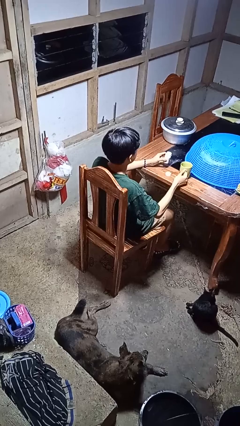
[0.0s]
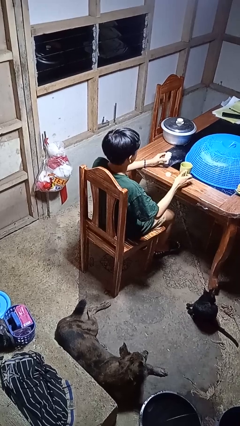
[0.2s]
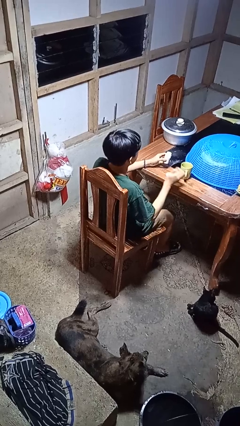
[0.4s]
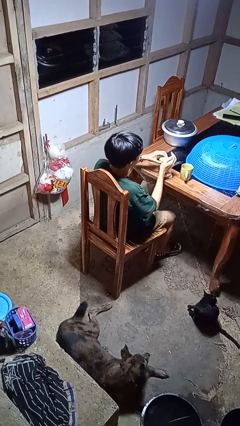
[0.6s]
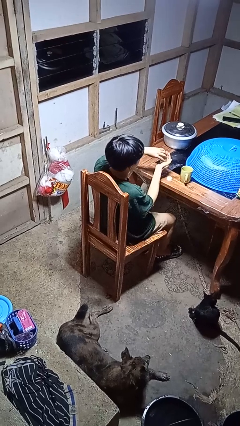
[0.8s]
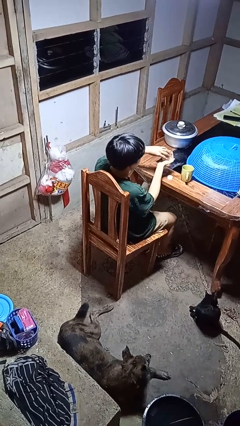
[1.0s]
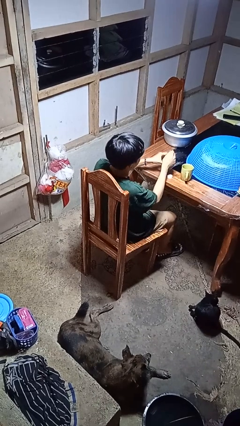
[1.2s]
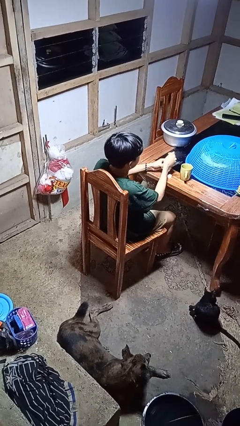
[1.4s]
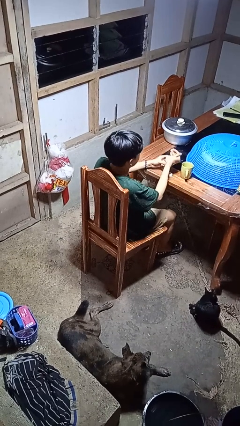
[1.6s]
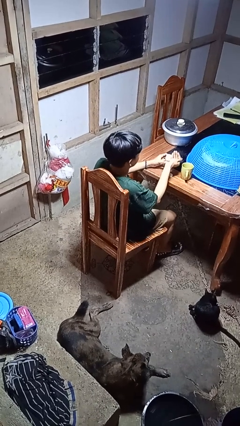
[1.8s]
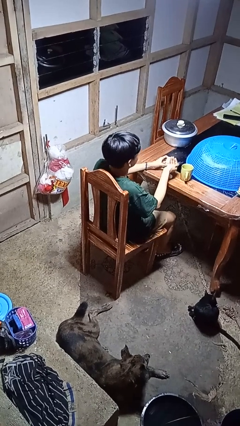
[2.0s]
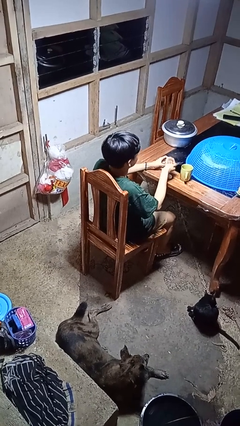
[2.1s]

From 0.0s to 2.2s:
person takes medicine pills

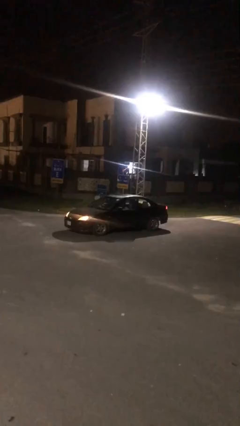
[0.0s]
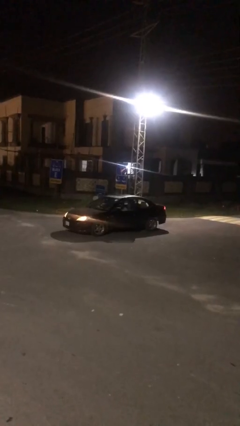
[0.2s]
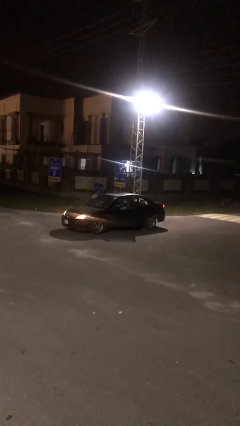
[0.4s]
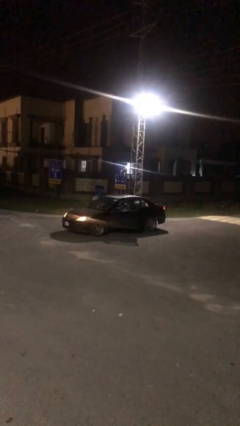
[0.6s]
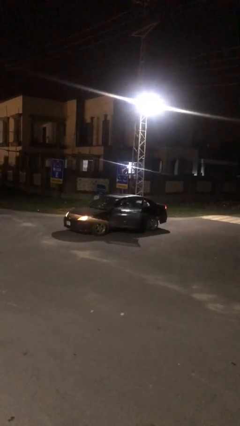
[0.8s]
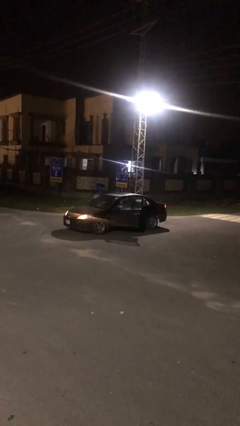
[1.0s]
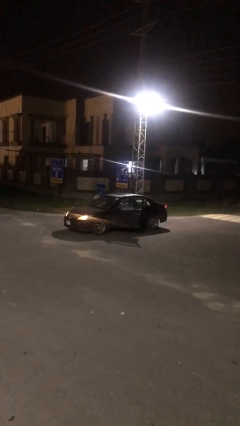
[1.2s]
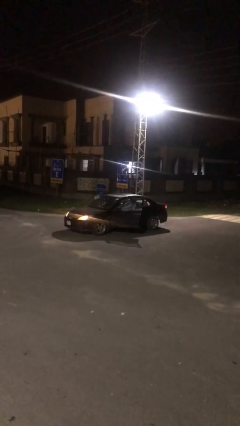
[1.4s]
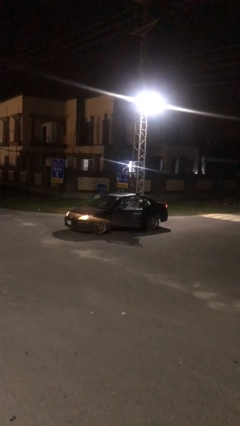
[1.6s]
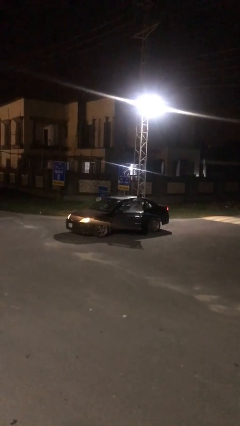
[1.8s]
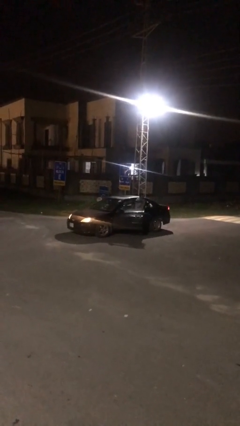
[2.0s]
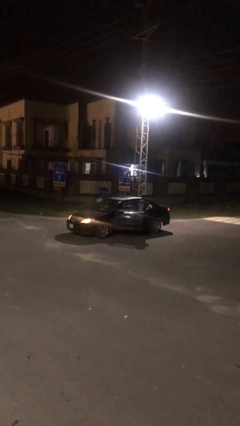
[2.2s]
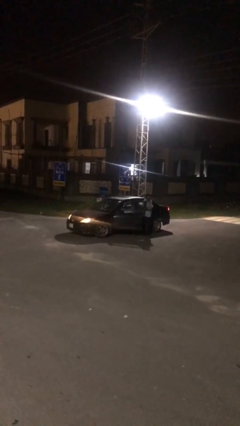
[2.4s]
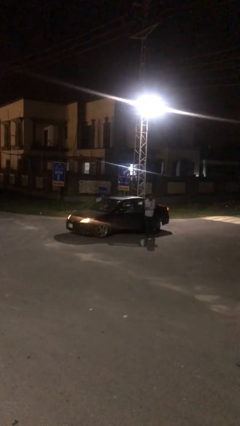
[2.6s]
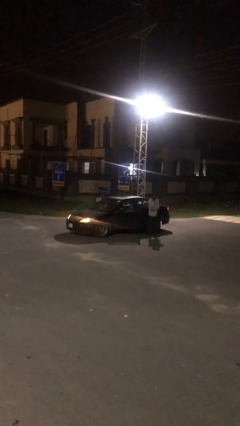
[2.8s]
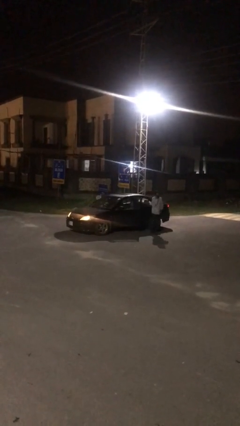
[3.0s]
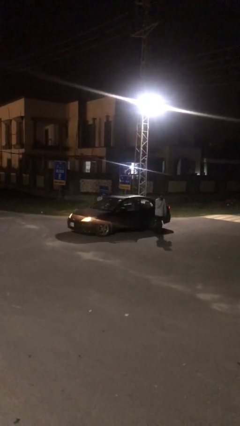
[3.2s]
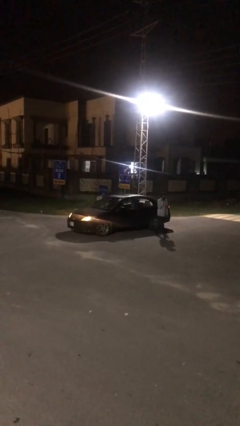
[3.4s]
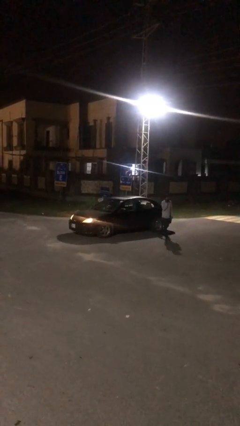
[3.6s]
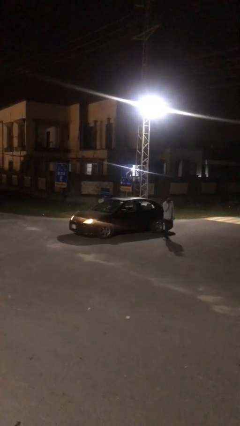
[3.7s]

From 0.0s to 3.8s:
car drops off person

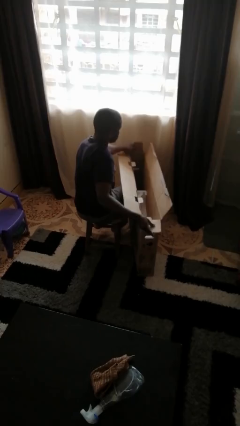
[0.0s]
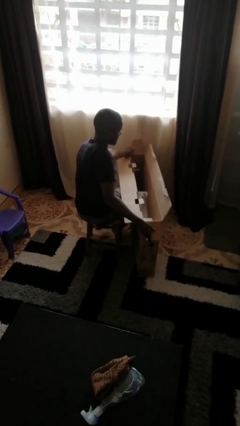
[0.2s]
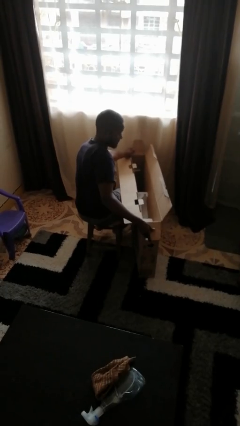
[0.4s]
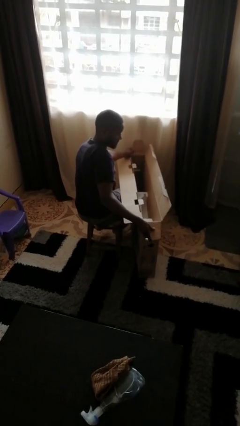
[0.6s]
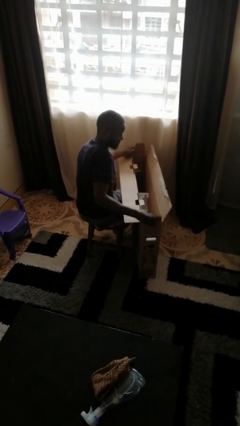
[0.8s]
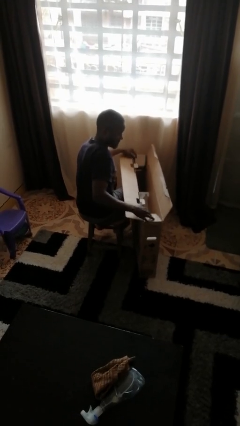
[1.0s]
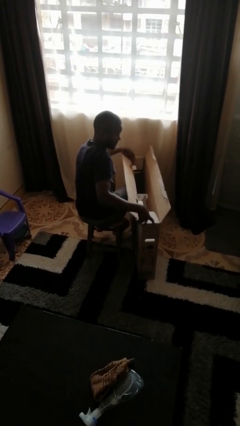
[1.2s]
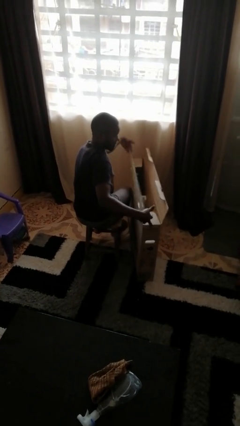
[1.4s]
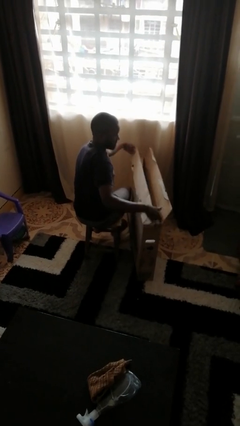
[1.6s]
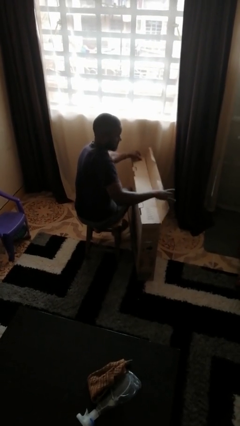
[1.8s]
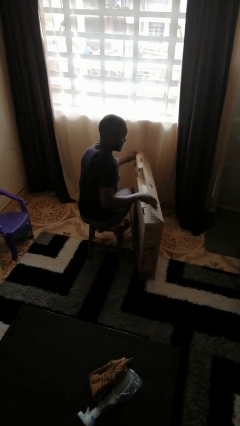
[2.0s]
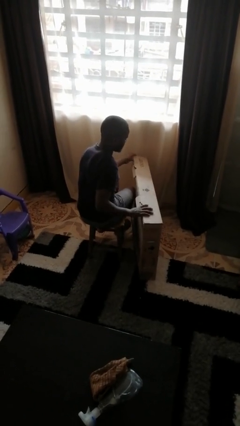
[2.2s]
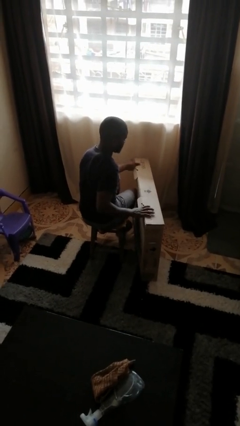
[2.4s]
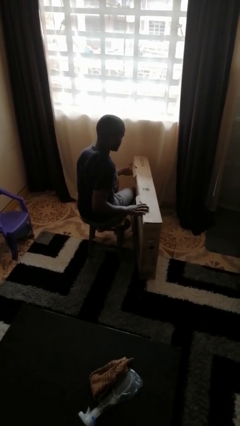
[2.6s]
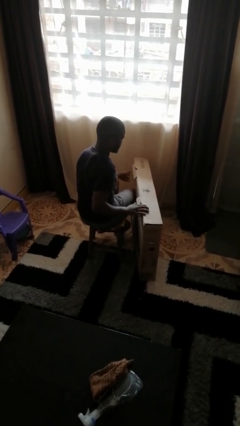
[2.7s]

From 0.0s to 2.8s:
person closes box

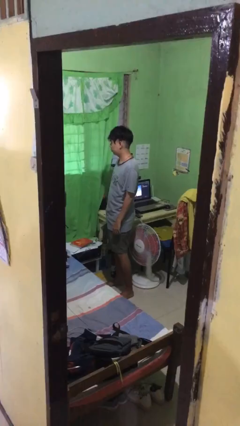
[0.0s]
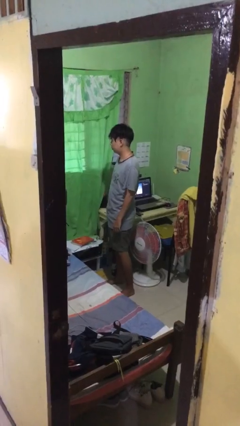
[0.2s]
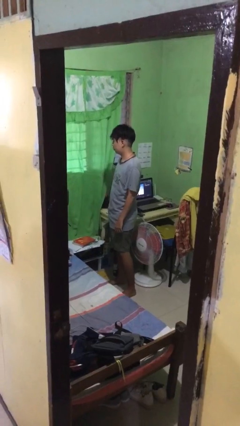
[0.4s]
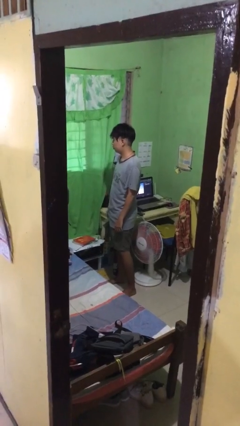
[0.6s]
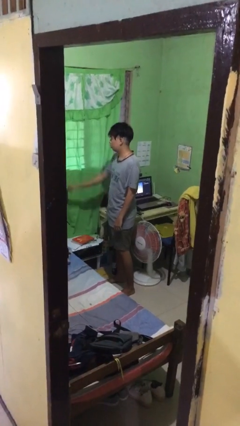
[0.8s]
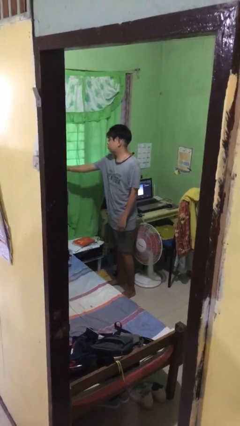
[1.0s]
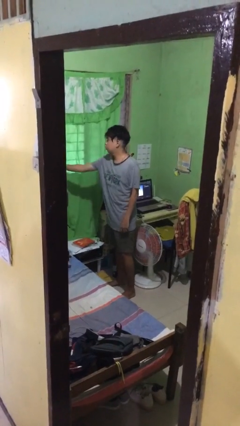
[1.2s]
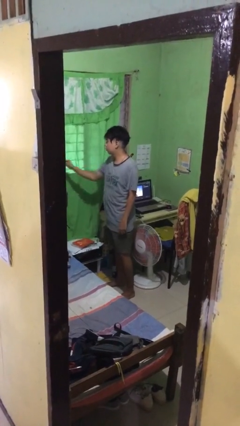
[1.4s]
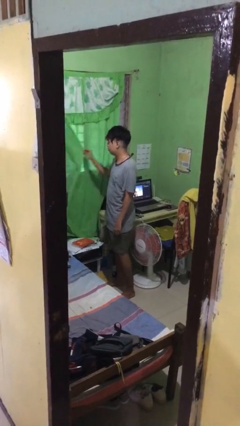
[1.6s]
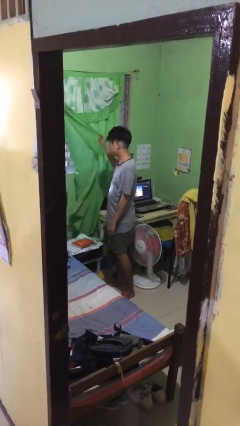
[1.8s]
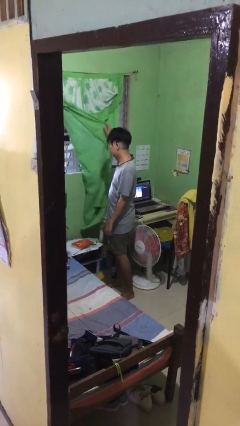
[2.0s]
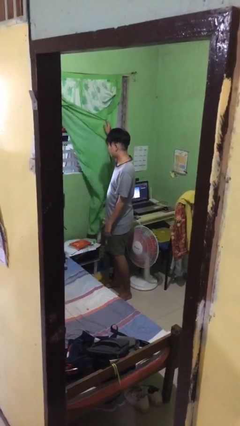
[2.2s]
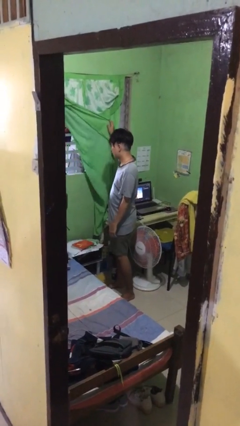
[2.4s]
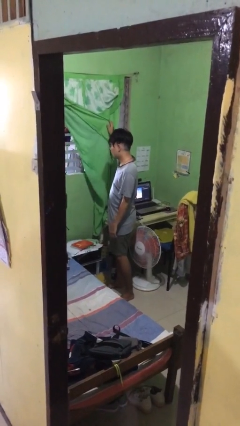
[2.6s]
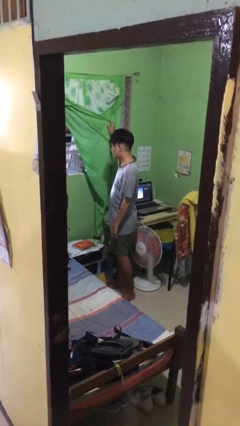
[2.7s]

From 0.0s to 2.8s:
person opens curtains

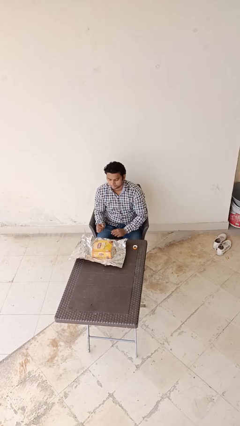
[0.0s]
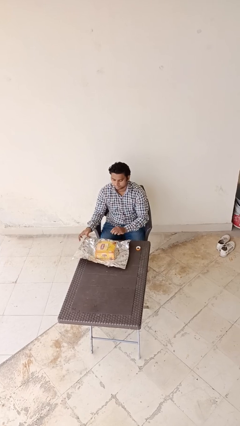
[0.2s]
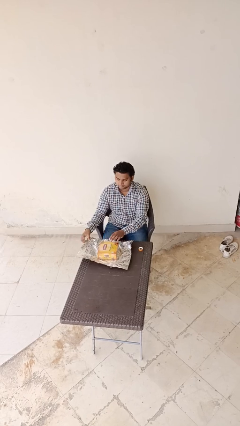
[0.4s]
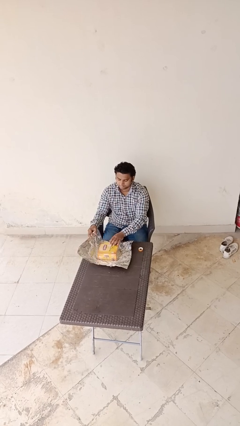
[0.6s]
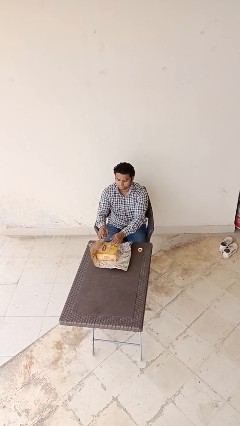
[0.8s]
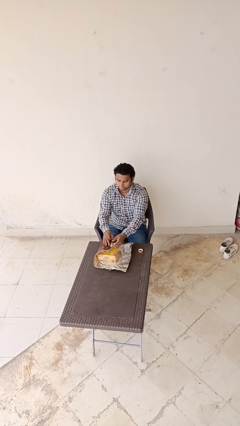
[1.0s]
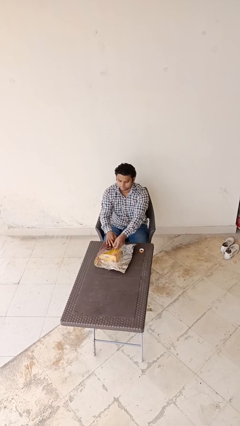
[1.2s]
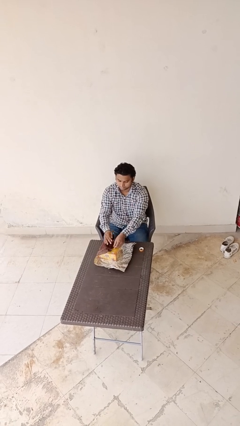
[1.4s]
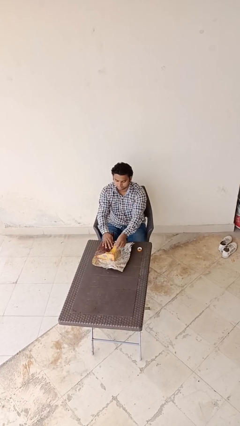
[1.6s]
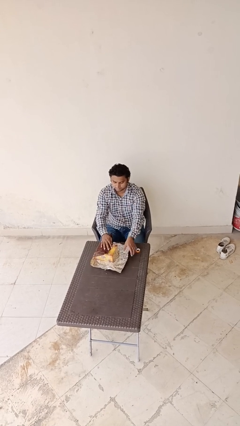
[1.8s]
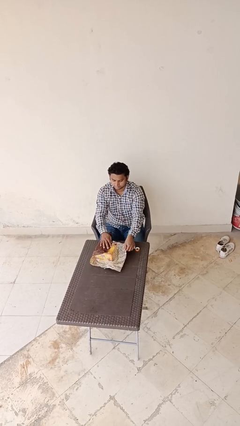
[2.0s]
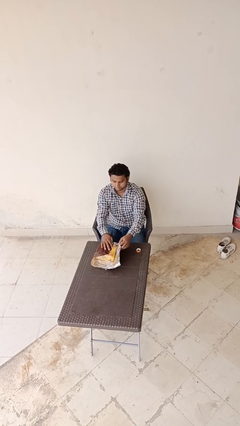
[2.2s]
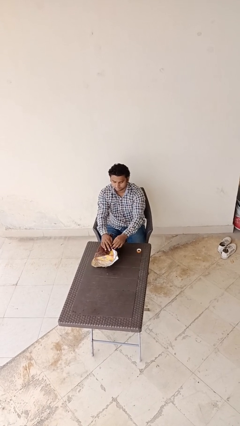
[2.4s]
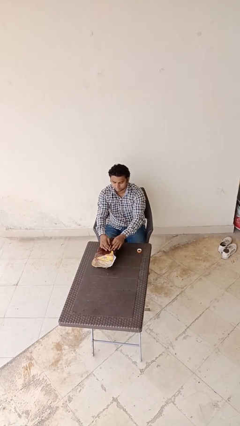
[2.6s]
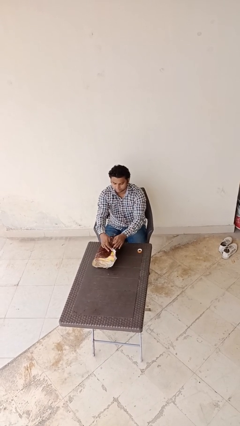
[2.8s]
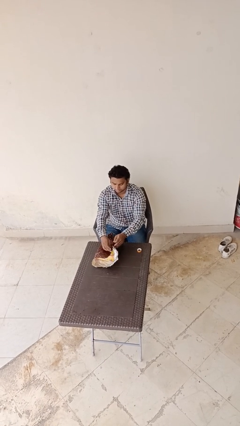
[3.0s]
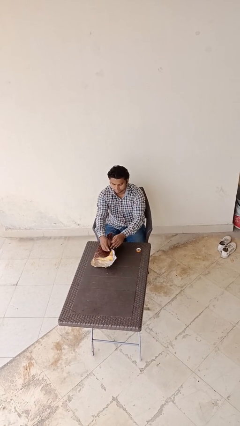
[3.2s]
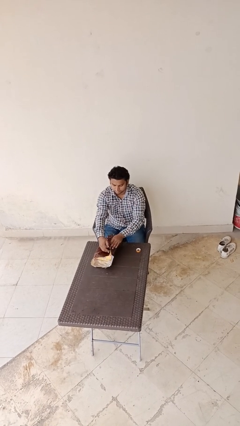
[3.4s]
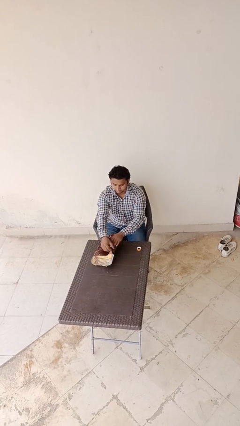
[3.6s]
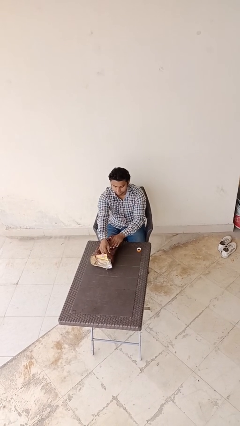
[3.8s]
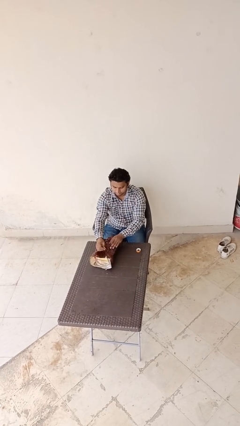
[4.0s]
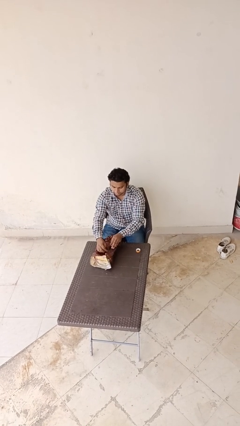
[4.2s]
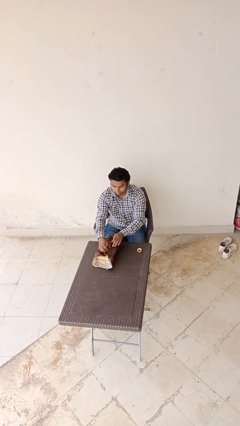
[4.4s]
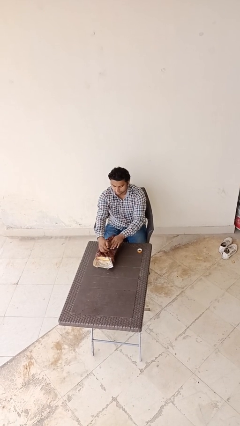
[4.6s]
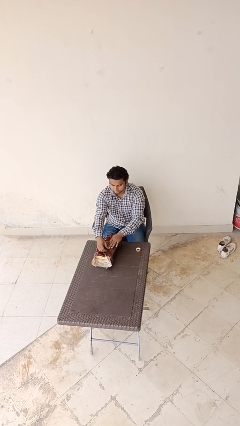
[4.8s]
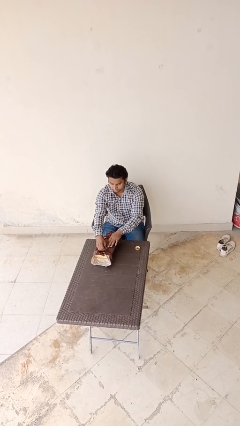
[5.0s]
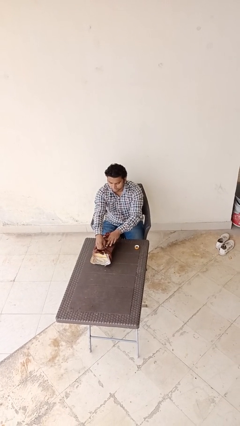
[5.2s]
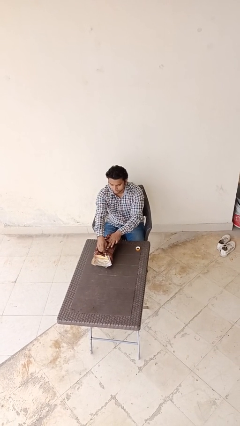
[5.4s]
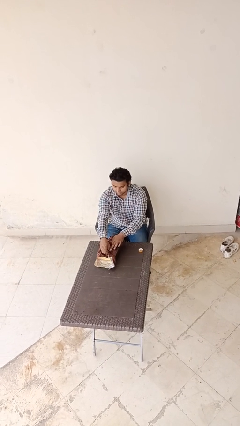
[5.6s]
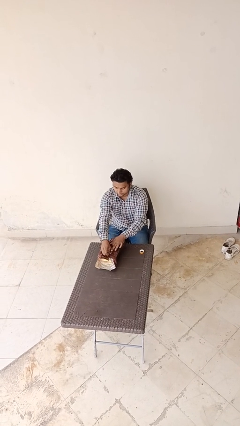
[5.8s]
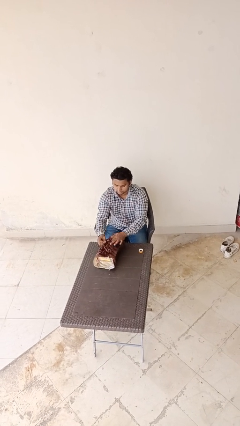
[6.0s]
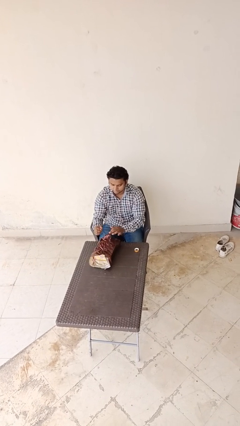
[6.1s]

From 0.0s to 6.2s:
person wraps box
